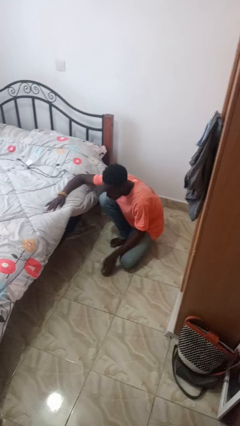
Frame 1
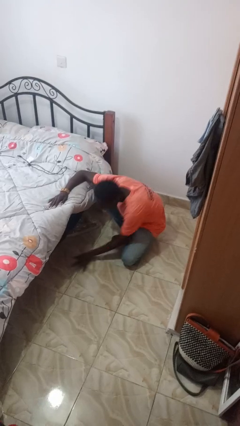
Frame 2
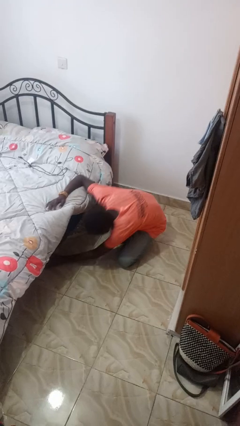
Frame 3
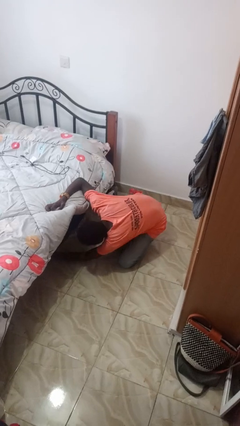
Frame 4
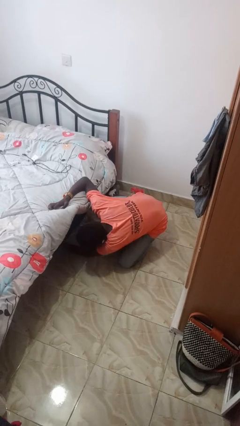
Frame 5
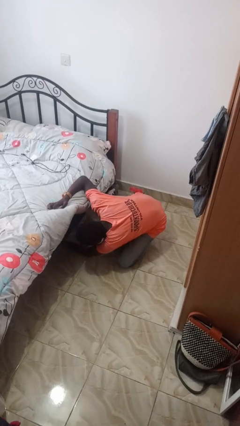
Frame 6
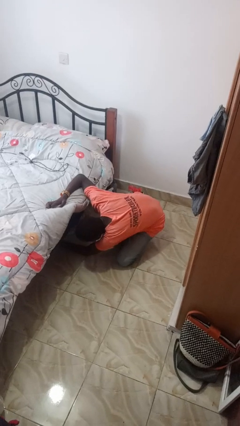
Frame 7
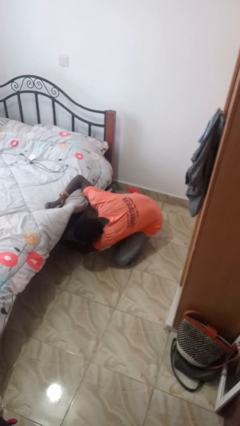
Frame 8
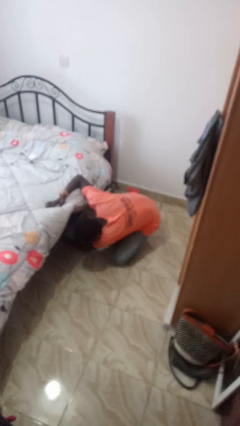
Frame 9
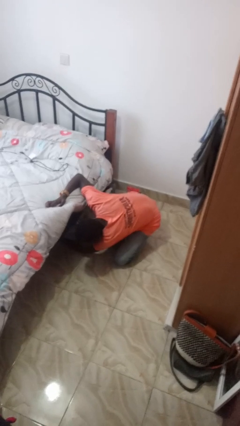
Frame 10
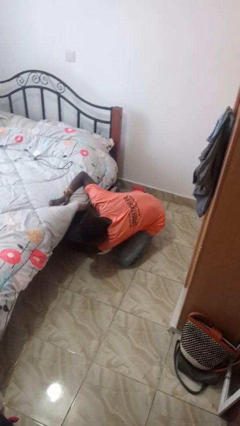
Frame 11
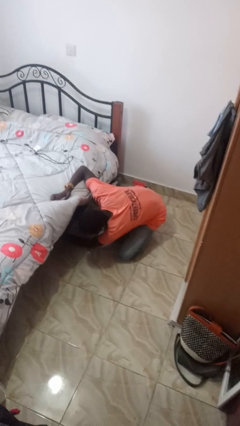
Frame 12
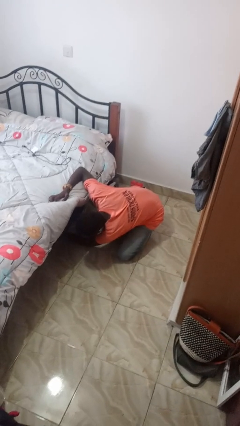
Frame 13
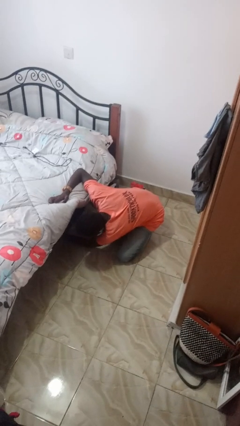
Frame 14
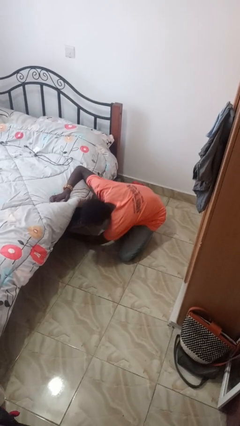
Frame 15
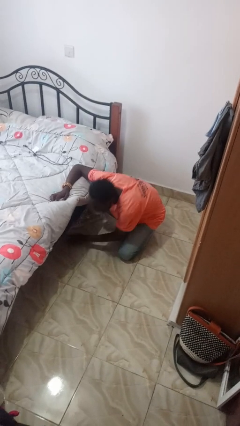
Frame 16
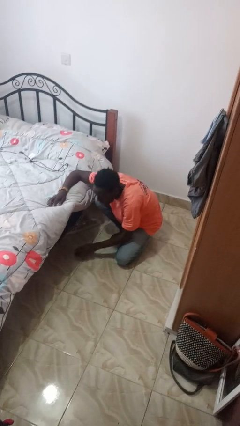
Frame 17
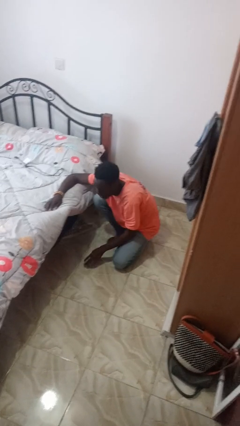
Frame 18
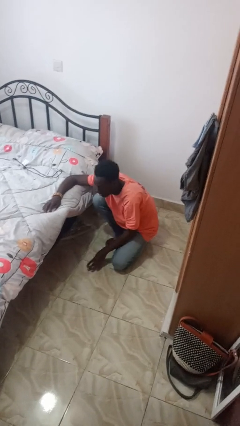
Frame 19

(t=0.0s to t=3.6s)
person searches under bed

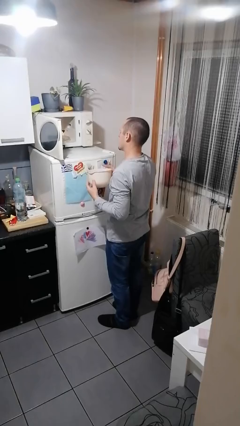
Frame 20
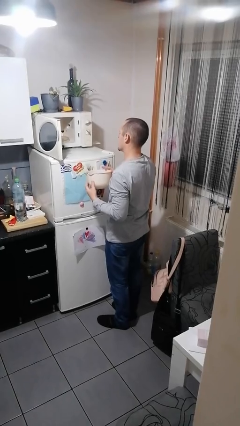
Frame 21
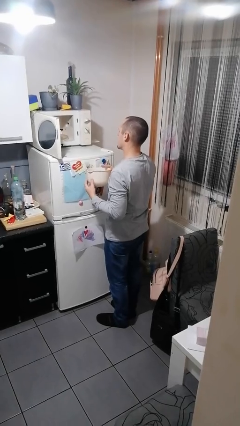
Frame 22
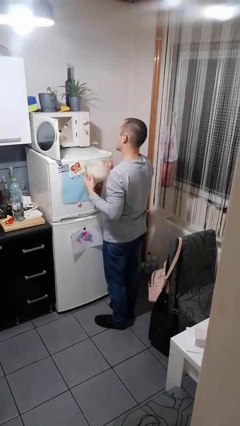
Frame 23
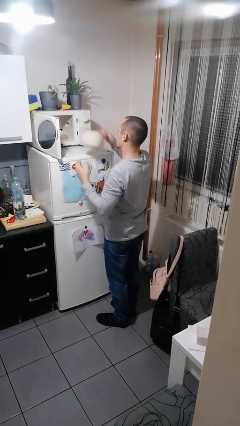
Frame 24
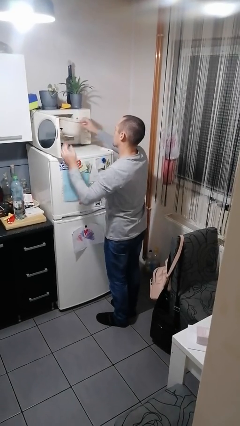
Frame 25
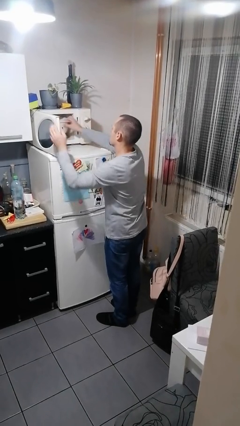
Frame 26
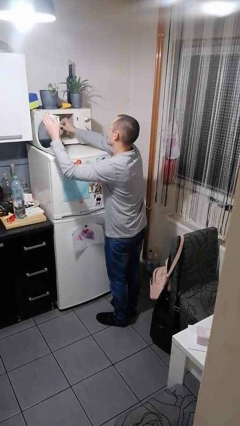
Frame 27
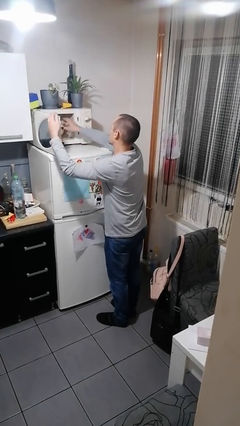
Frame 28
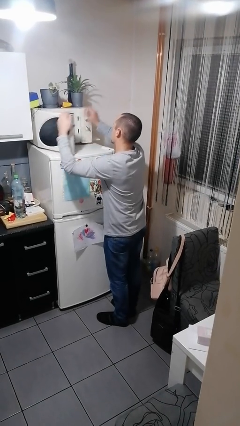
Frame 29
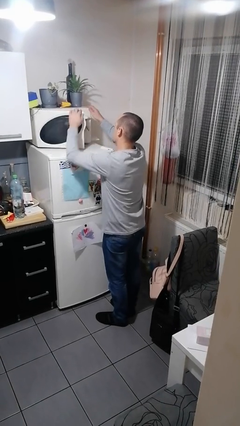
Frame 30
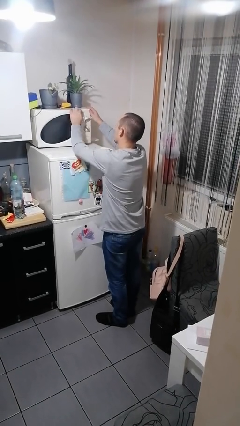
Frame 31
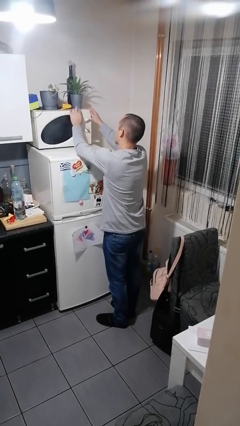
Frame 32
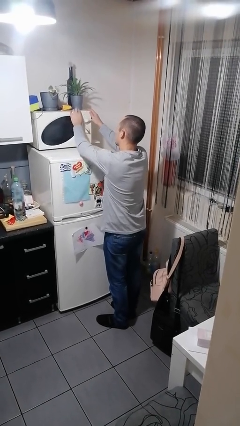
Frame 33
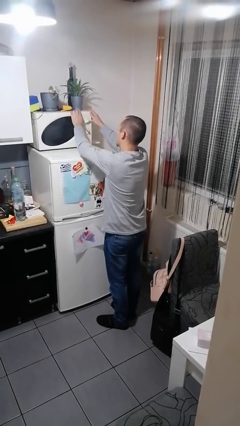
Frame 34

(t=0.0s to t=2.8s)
person puts object into microwave

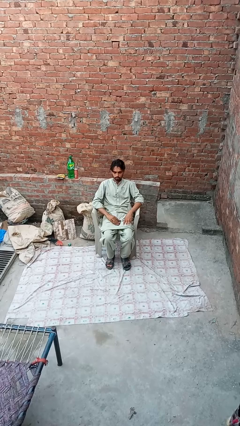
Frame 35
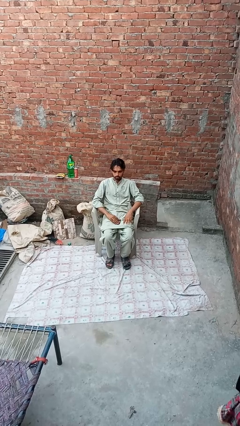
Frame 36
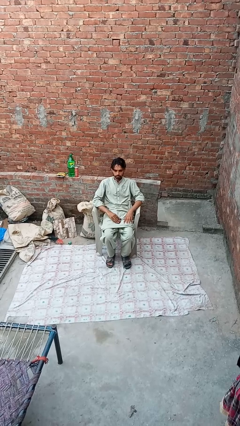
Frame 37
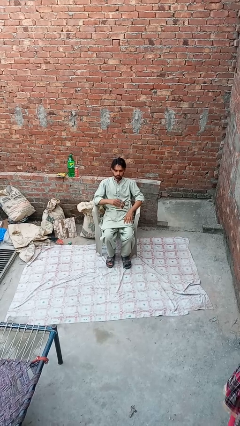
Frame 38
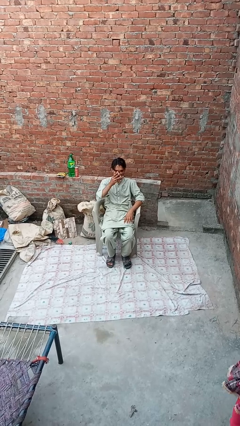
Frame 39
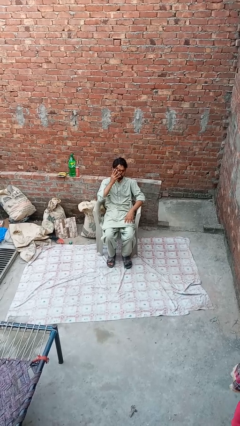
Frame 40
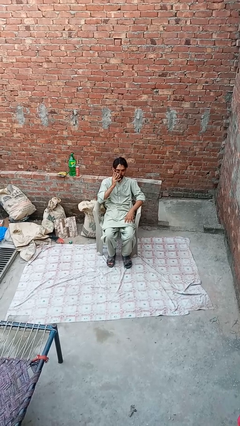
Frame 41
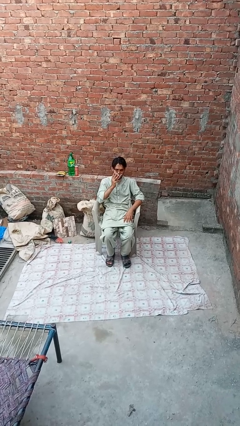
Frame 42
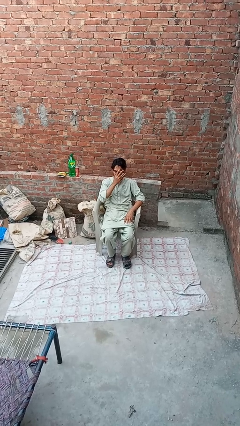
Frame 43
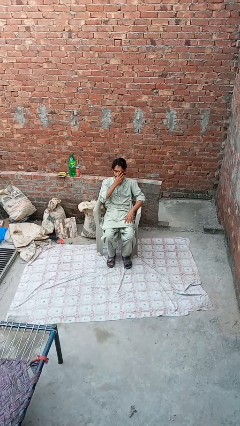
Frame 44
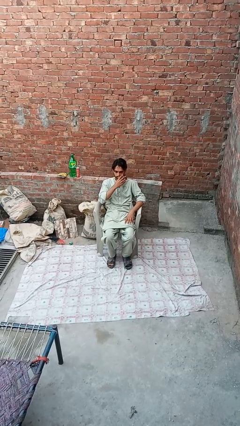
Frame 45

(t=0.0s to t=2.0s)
person wipes mouth with napkin

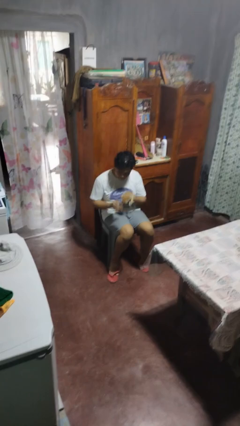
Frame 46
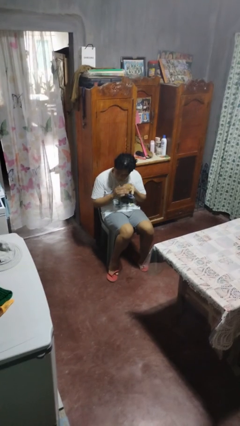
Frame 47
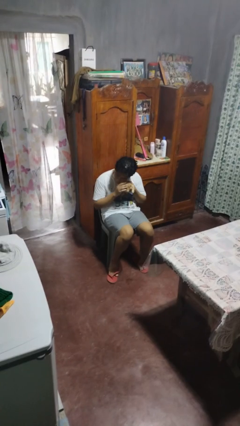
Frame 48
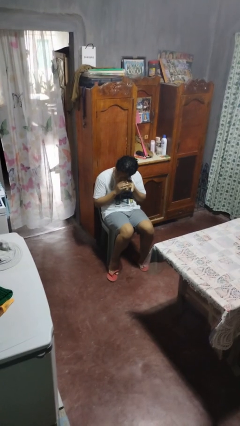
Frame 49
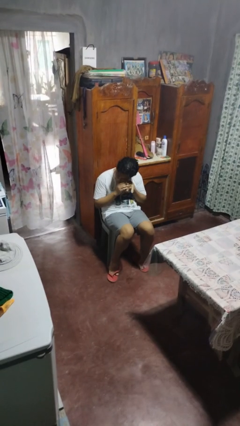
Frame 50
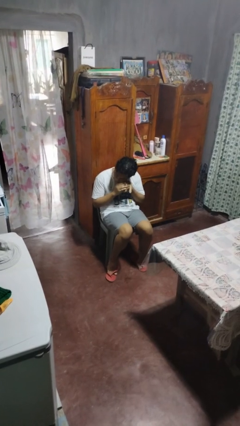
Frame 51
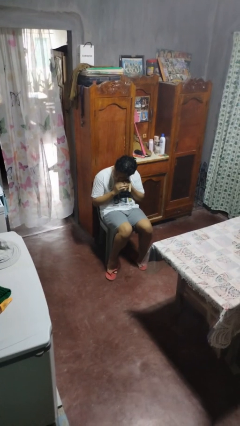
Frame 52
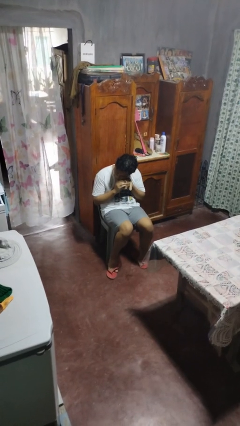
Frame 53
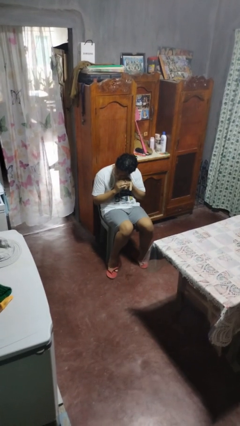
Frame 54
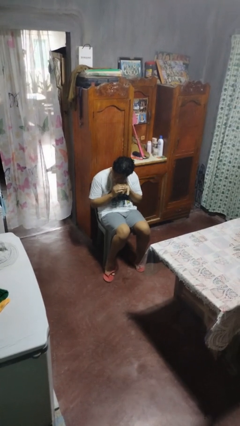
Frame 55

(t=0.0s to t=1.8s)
person hugs cat

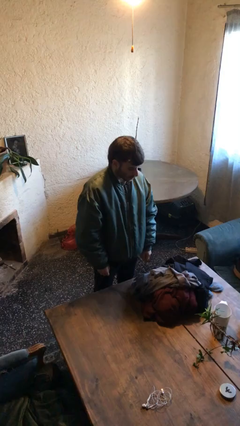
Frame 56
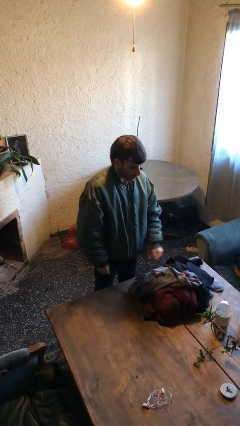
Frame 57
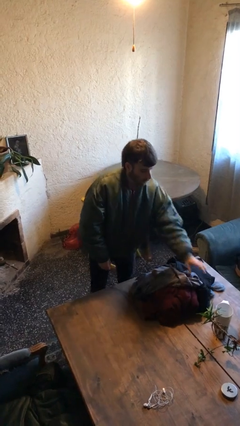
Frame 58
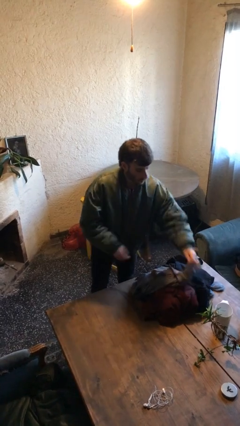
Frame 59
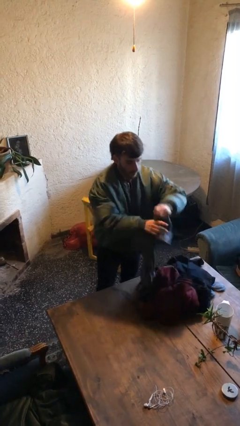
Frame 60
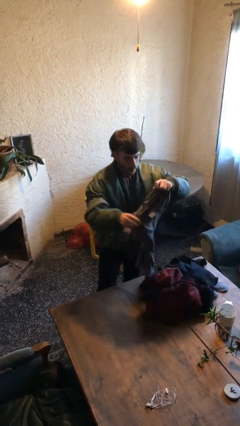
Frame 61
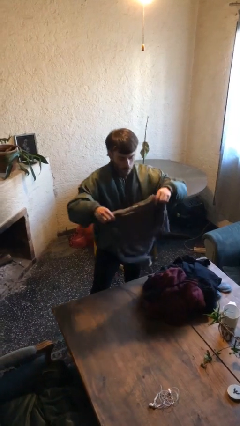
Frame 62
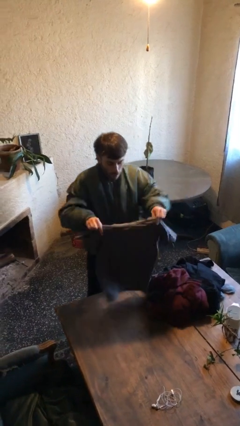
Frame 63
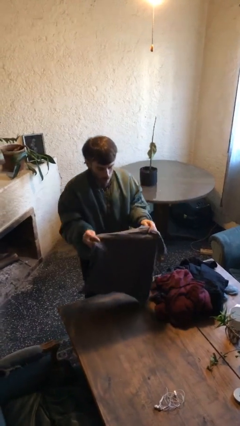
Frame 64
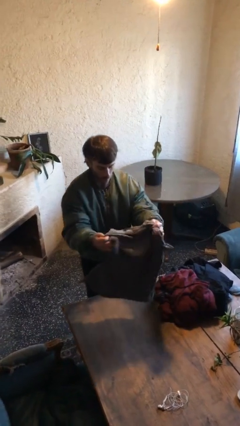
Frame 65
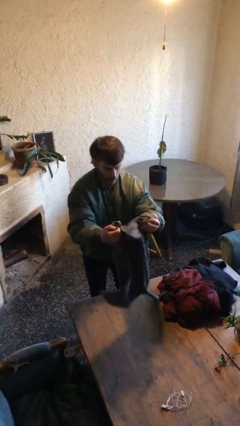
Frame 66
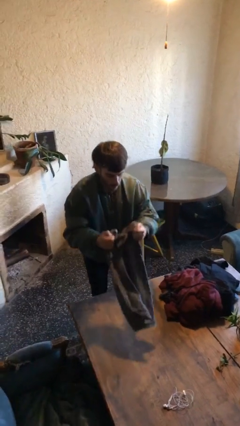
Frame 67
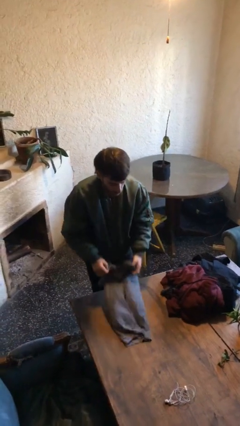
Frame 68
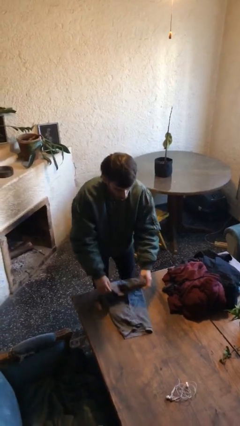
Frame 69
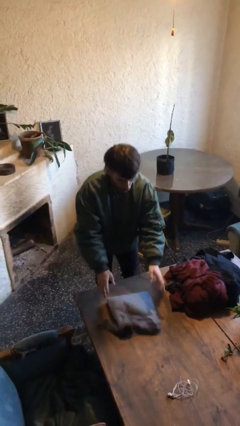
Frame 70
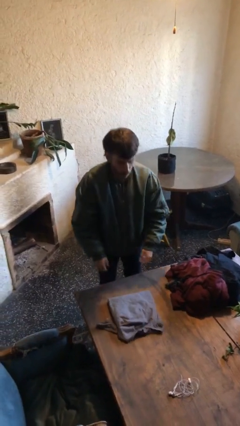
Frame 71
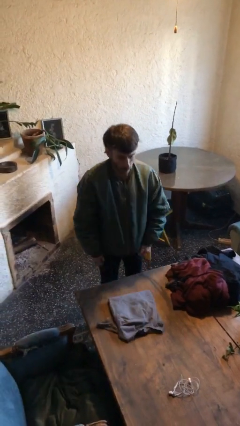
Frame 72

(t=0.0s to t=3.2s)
person folds shirt

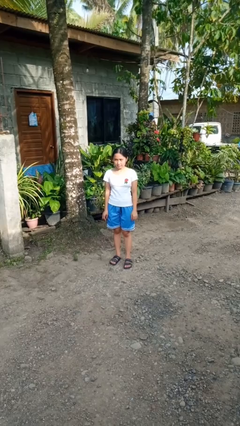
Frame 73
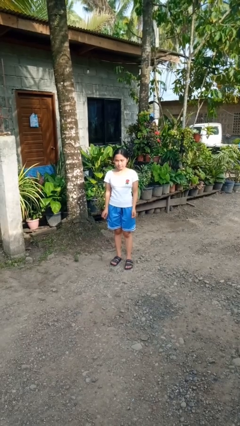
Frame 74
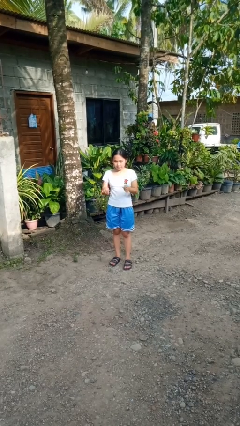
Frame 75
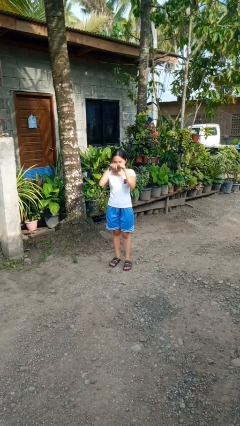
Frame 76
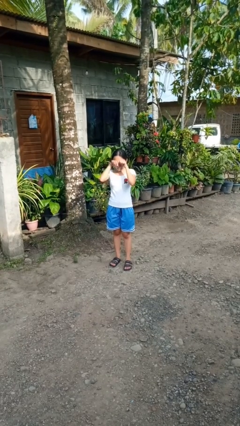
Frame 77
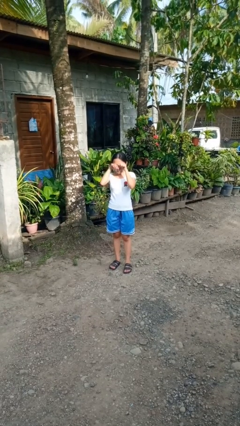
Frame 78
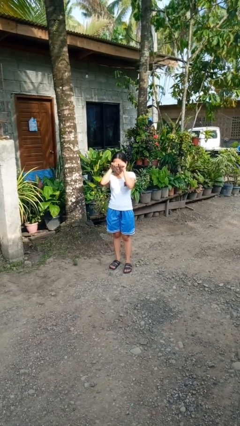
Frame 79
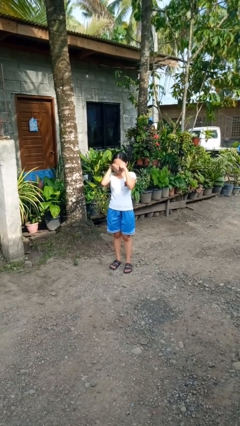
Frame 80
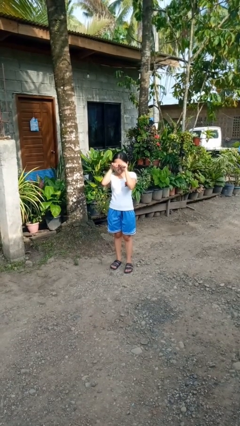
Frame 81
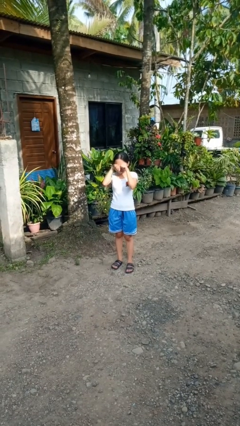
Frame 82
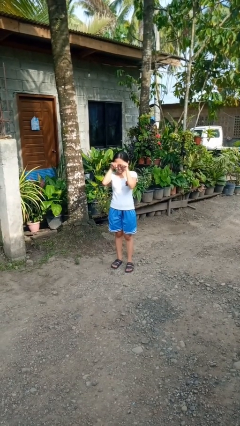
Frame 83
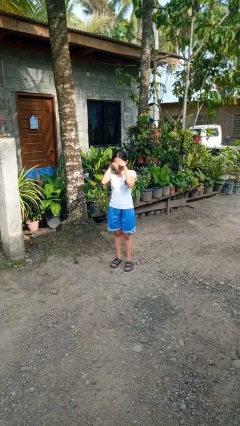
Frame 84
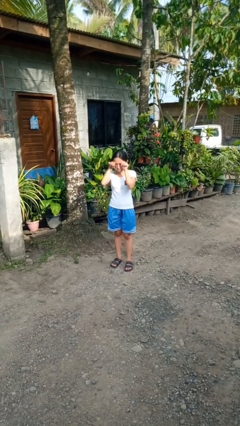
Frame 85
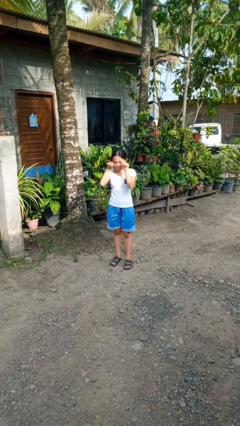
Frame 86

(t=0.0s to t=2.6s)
person rubs eyes

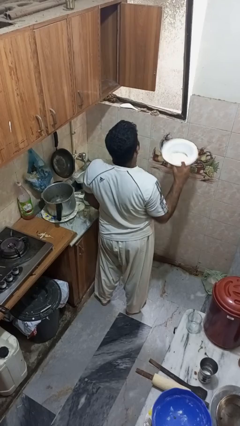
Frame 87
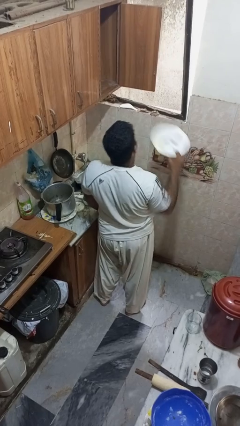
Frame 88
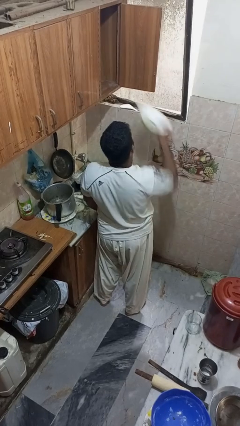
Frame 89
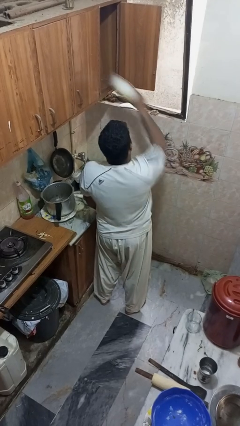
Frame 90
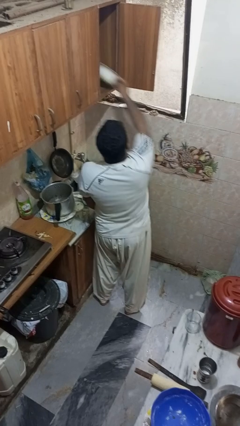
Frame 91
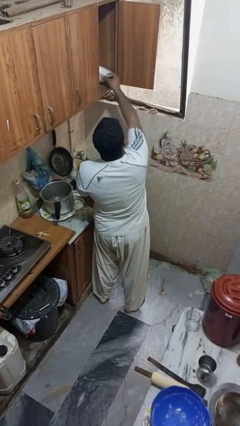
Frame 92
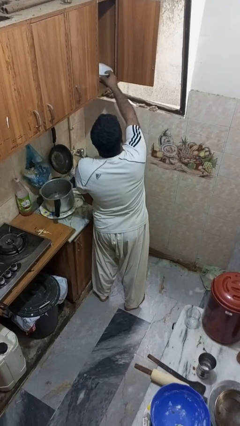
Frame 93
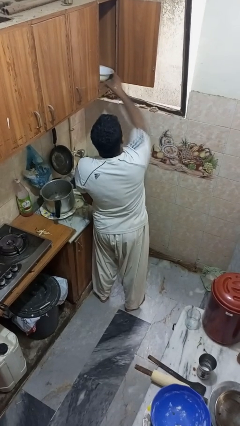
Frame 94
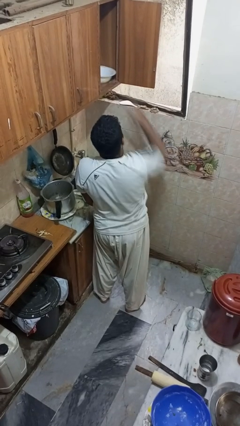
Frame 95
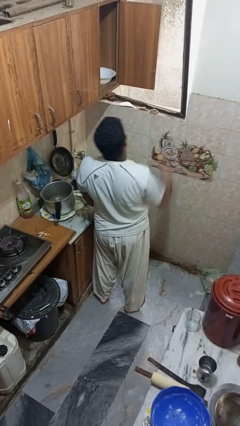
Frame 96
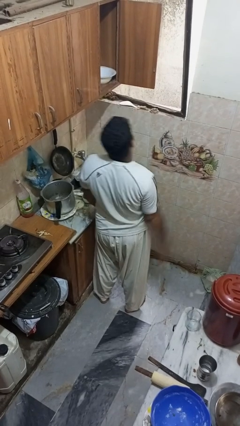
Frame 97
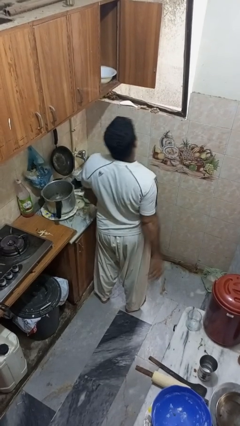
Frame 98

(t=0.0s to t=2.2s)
person puts object in cabinet
